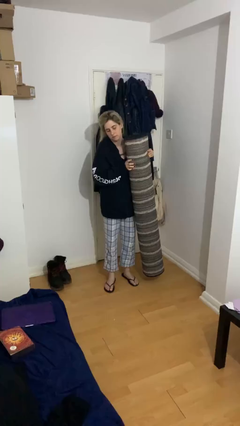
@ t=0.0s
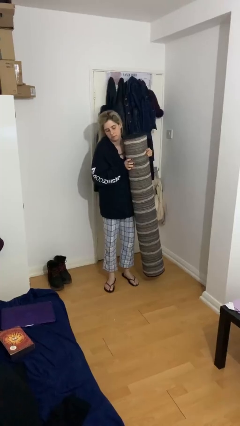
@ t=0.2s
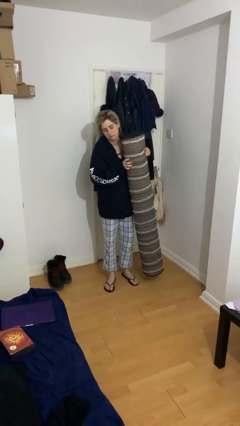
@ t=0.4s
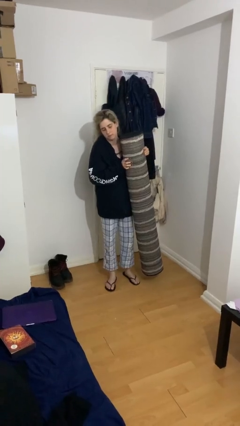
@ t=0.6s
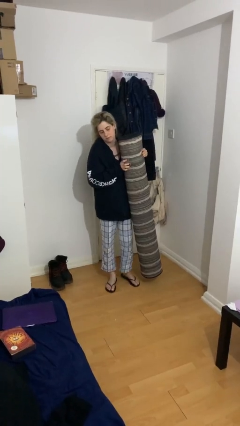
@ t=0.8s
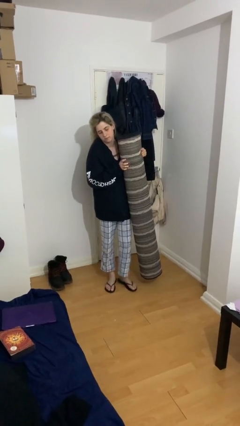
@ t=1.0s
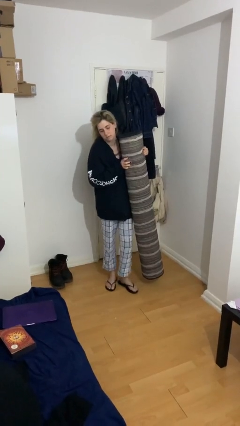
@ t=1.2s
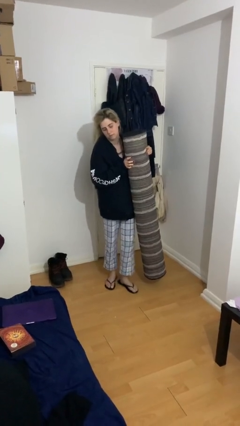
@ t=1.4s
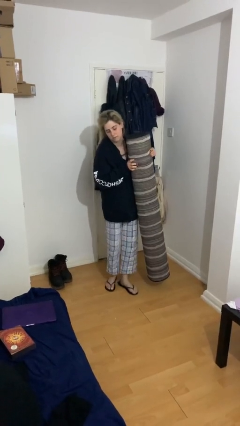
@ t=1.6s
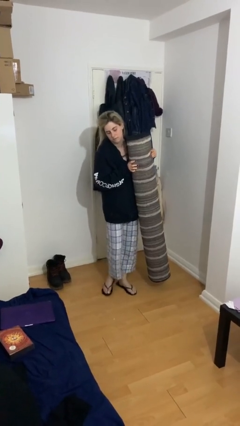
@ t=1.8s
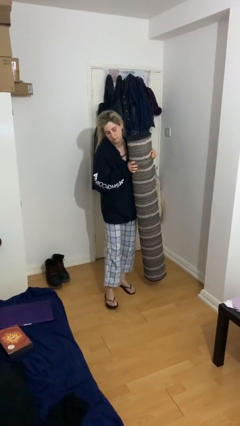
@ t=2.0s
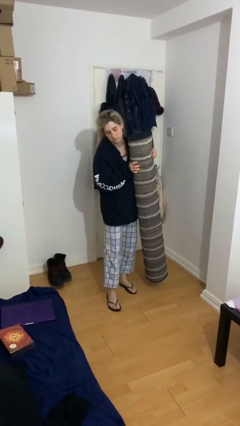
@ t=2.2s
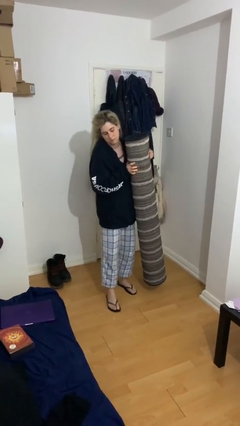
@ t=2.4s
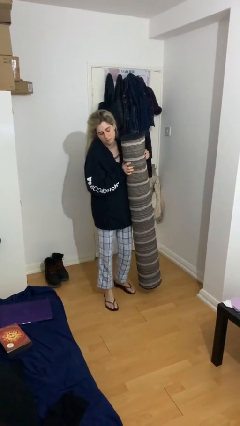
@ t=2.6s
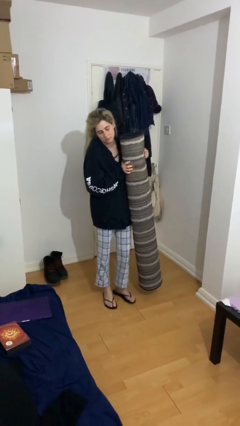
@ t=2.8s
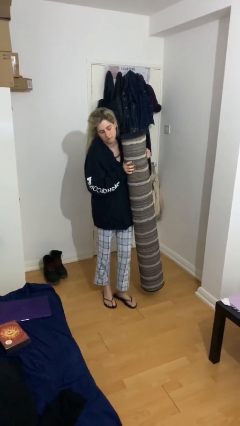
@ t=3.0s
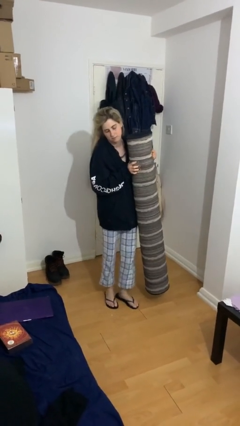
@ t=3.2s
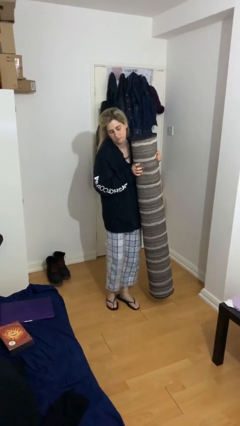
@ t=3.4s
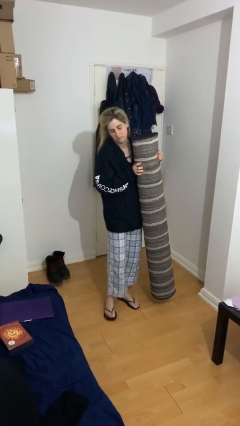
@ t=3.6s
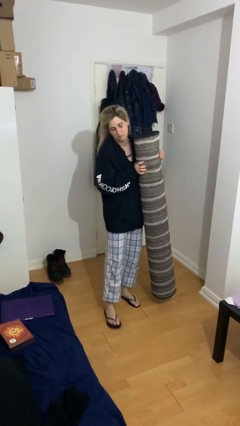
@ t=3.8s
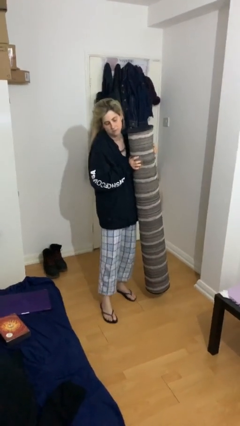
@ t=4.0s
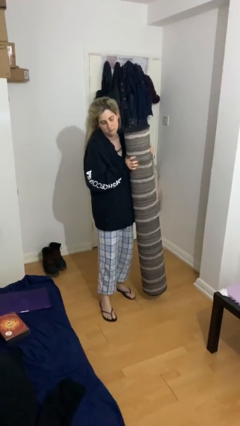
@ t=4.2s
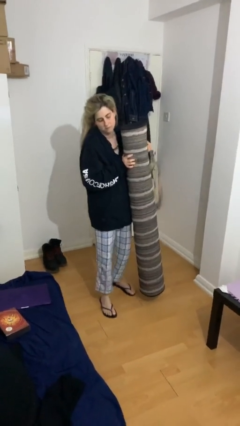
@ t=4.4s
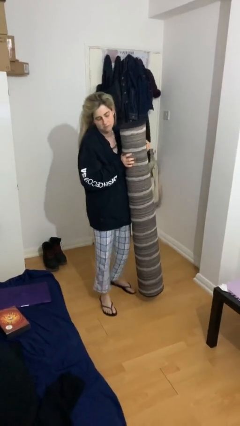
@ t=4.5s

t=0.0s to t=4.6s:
person carries heavy object

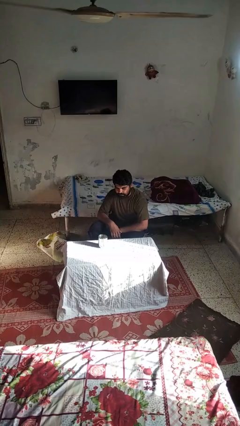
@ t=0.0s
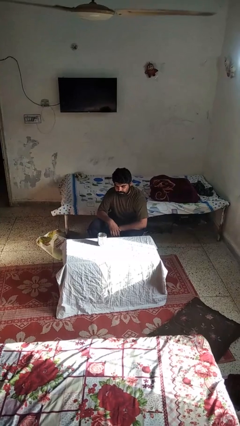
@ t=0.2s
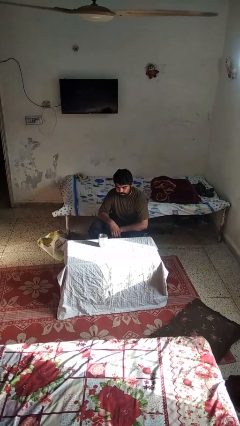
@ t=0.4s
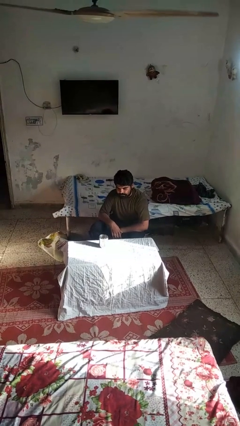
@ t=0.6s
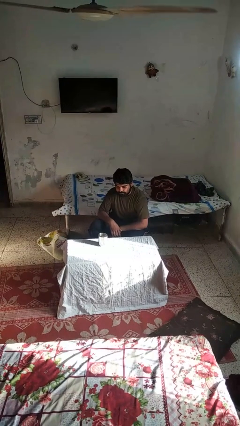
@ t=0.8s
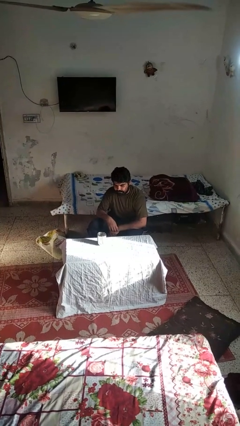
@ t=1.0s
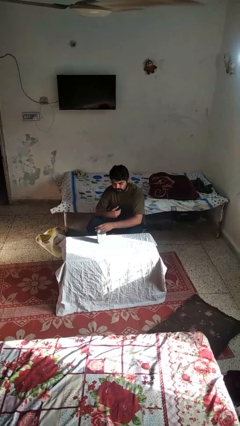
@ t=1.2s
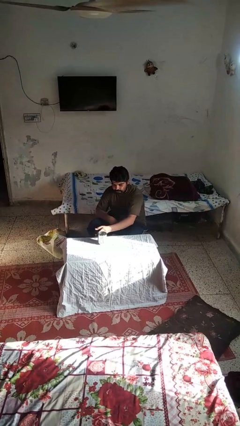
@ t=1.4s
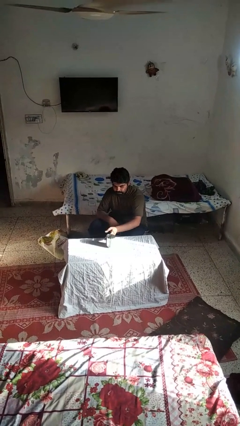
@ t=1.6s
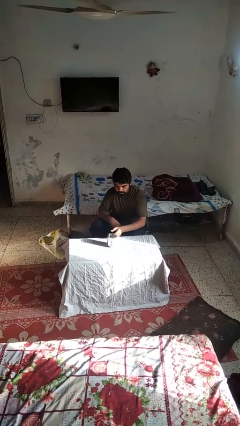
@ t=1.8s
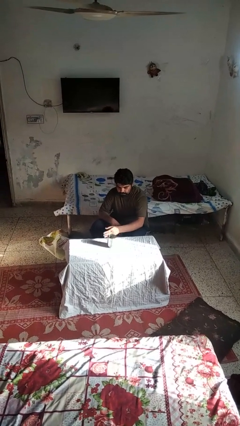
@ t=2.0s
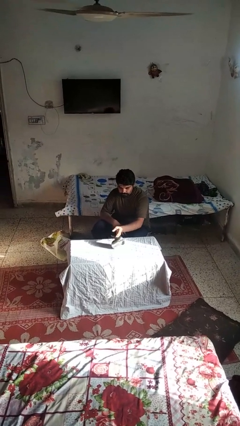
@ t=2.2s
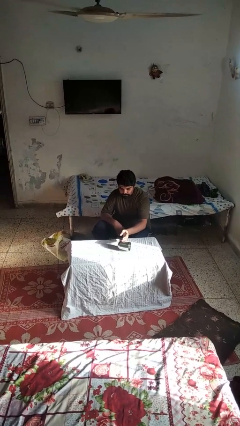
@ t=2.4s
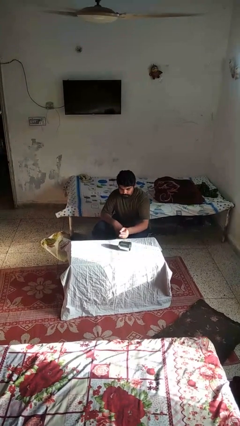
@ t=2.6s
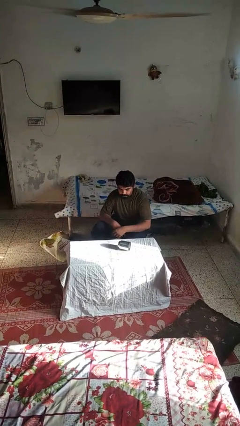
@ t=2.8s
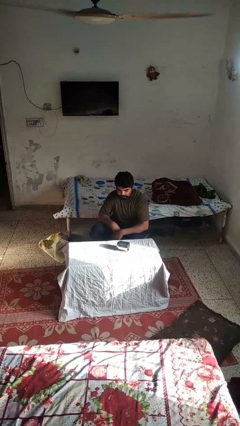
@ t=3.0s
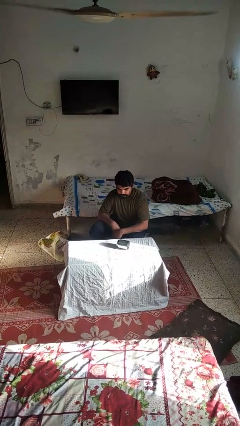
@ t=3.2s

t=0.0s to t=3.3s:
person knocks over glass

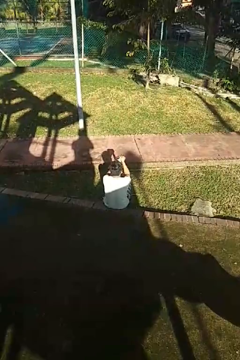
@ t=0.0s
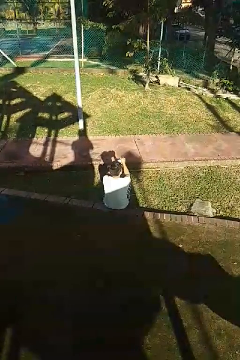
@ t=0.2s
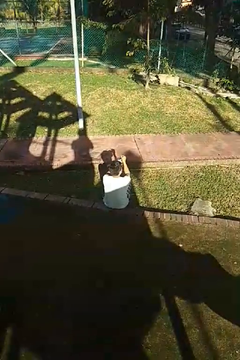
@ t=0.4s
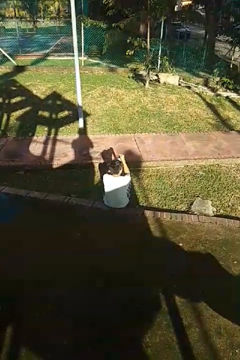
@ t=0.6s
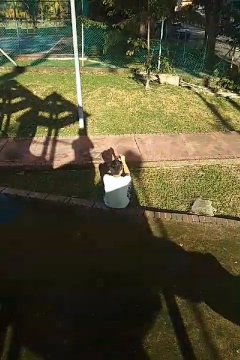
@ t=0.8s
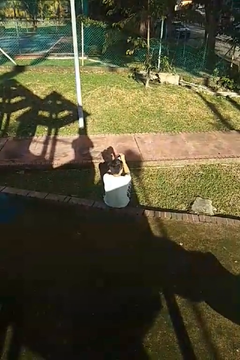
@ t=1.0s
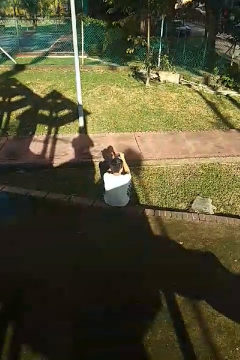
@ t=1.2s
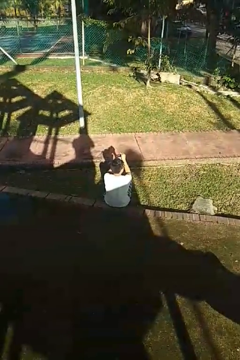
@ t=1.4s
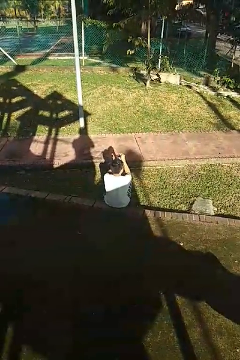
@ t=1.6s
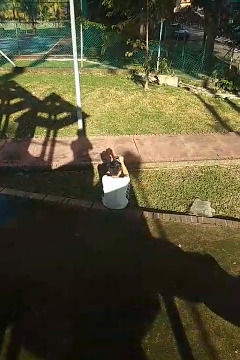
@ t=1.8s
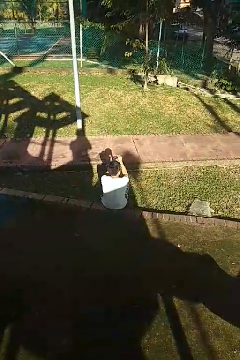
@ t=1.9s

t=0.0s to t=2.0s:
person stirs mug

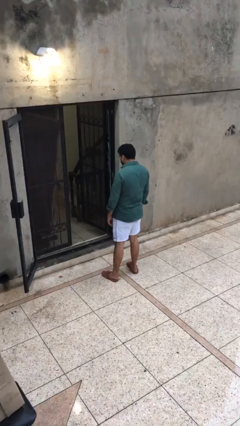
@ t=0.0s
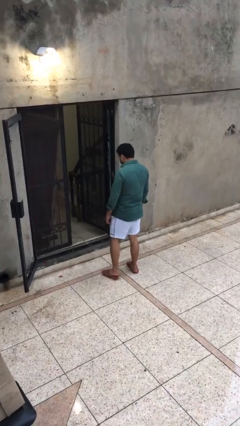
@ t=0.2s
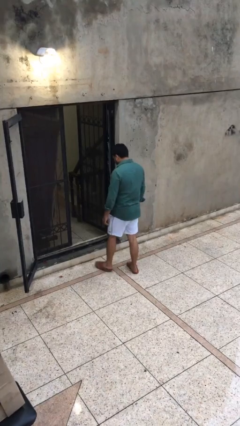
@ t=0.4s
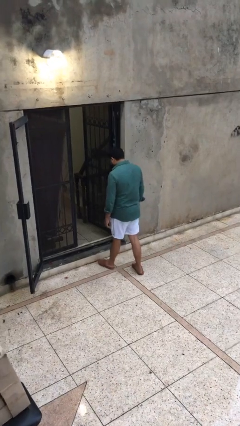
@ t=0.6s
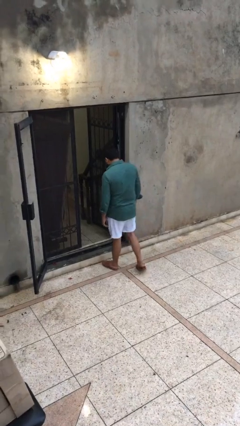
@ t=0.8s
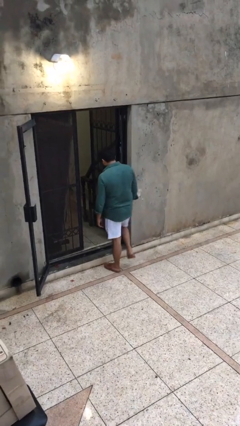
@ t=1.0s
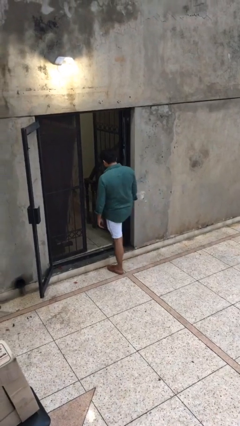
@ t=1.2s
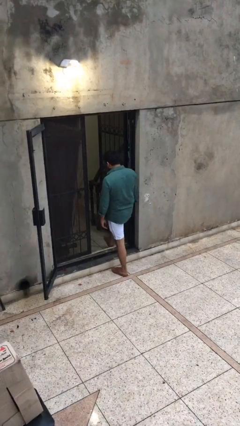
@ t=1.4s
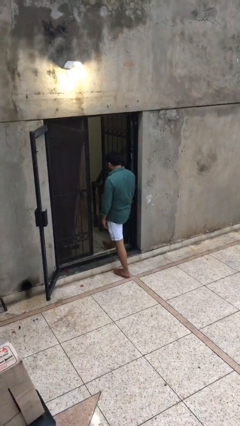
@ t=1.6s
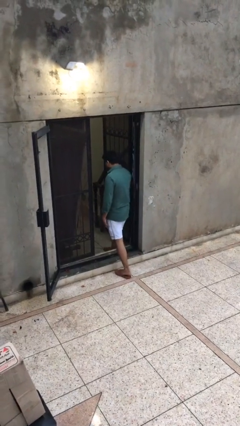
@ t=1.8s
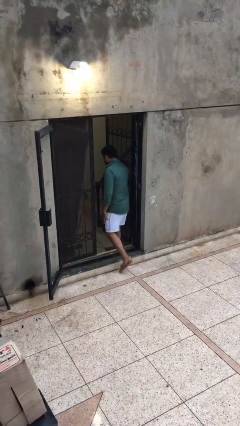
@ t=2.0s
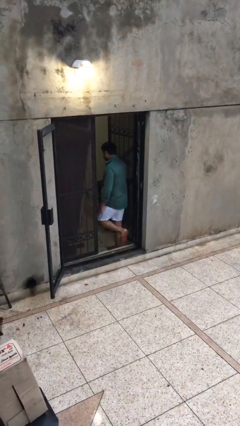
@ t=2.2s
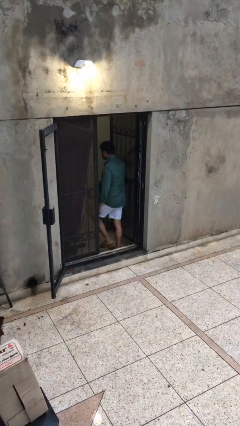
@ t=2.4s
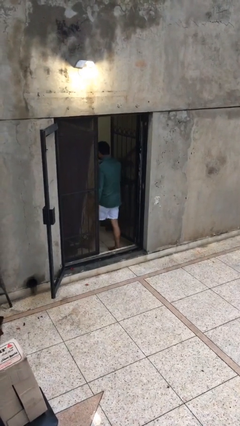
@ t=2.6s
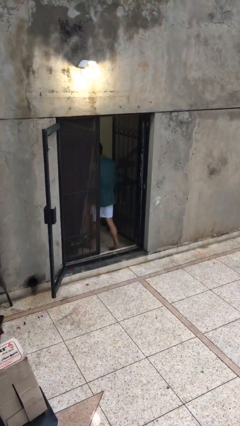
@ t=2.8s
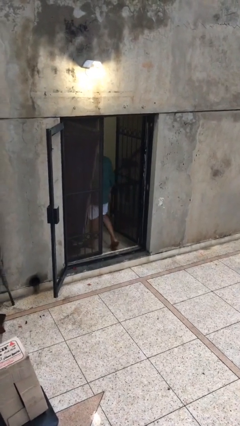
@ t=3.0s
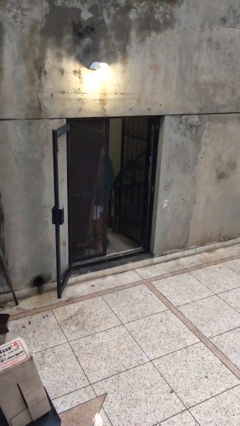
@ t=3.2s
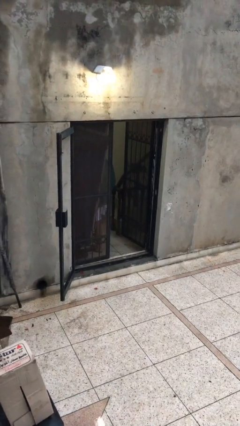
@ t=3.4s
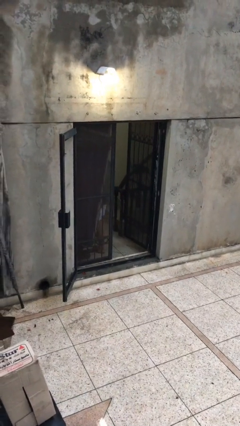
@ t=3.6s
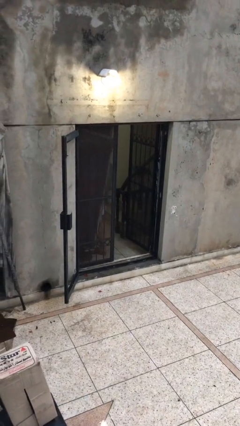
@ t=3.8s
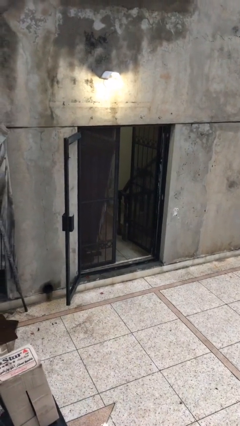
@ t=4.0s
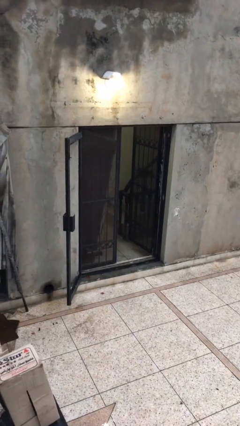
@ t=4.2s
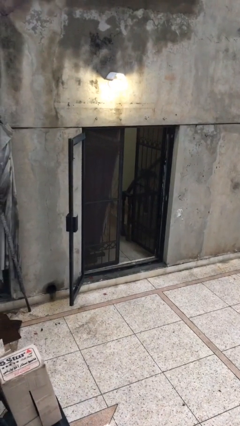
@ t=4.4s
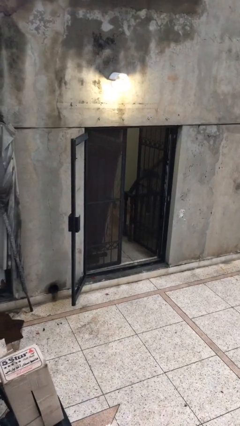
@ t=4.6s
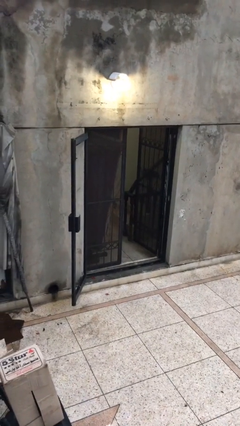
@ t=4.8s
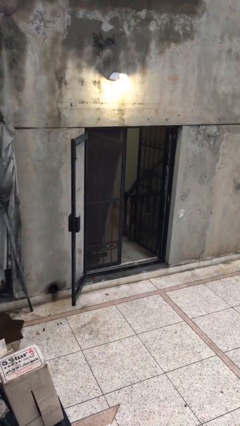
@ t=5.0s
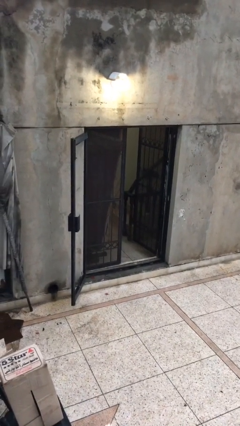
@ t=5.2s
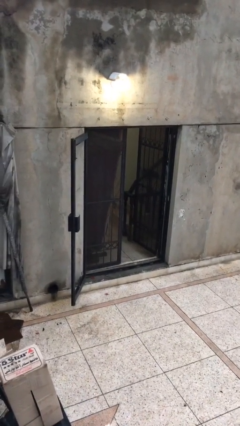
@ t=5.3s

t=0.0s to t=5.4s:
person exits scene through structure

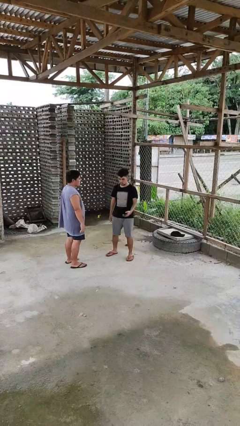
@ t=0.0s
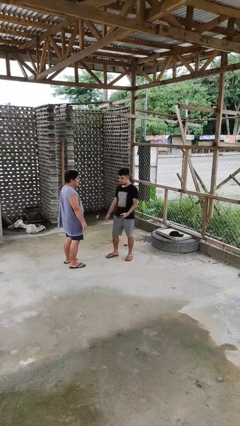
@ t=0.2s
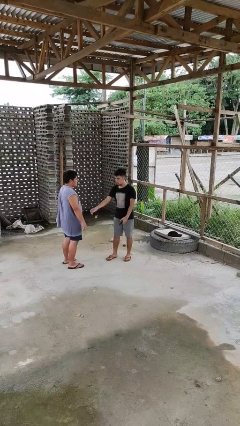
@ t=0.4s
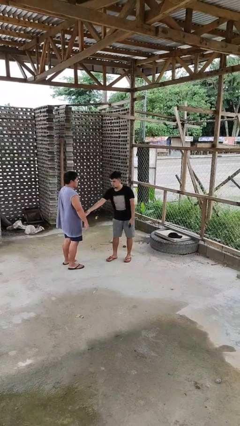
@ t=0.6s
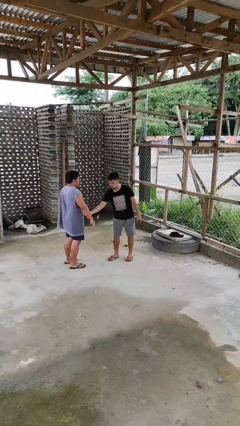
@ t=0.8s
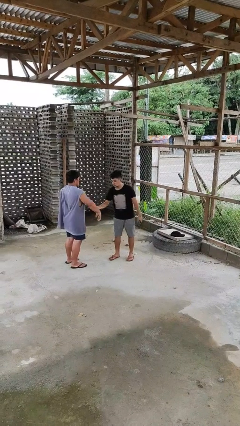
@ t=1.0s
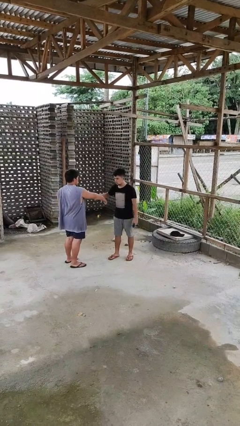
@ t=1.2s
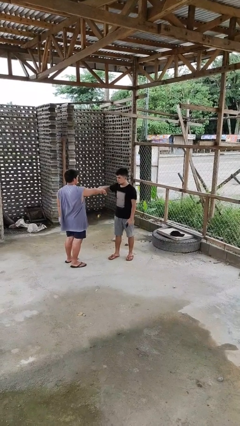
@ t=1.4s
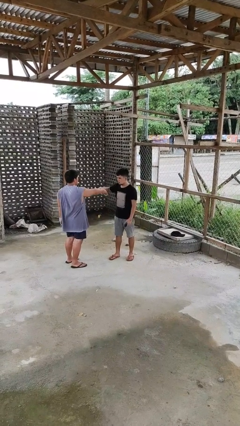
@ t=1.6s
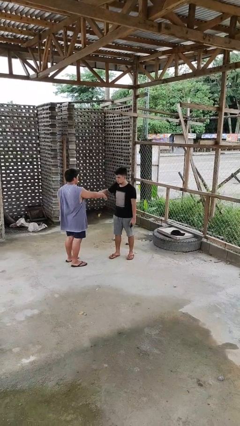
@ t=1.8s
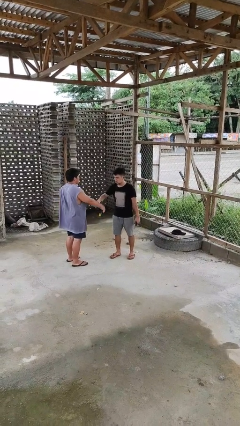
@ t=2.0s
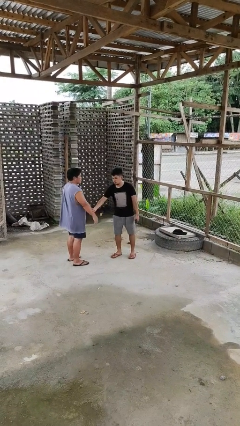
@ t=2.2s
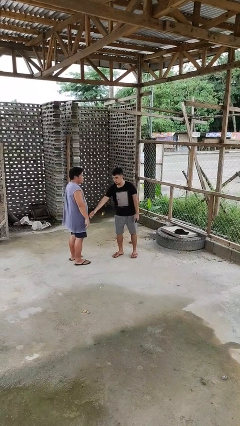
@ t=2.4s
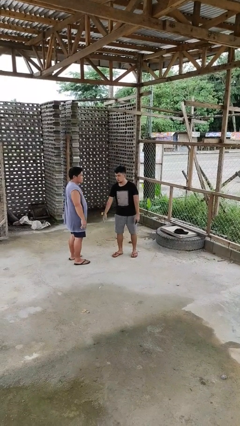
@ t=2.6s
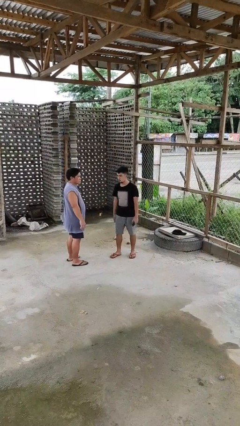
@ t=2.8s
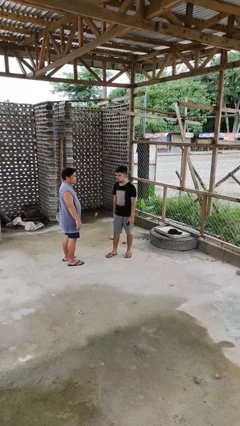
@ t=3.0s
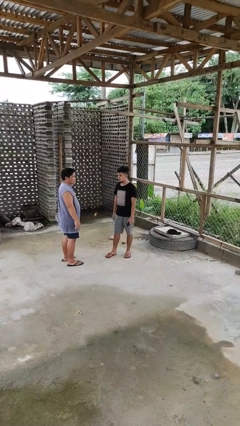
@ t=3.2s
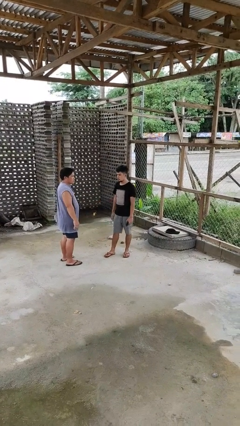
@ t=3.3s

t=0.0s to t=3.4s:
person grabs person by forearm
